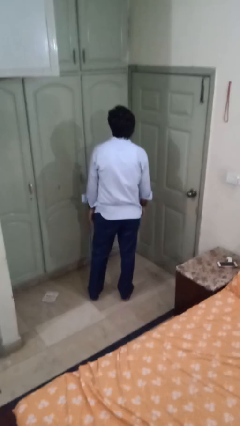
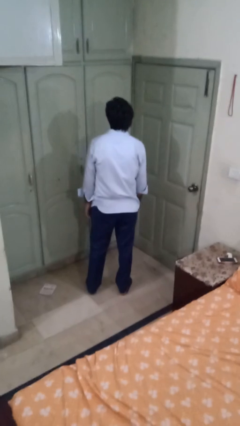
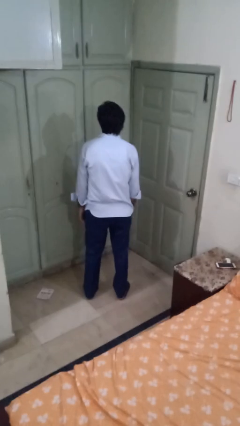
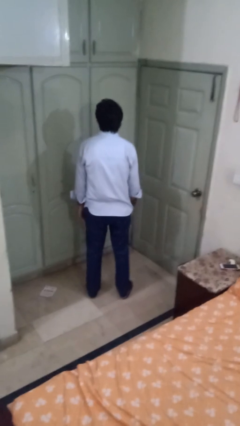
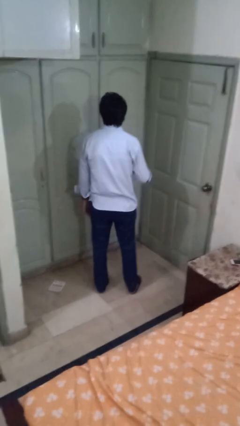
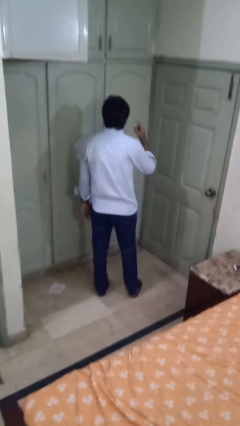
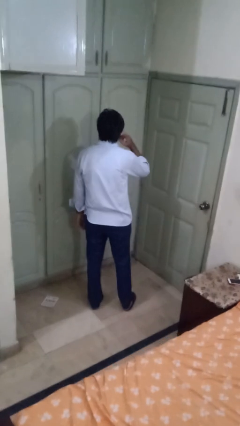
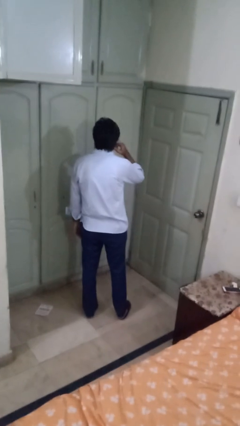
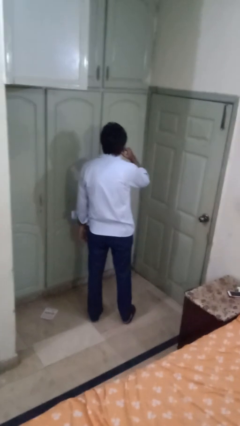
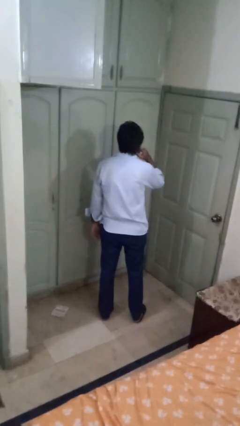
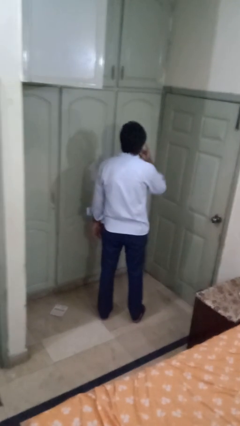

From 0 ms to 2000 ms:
person gestures listen closely

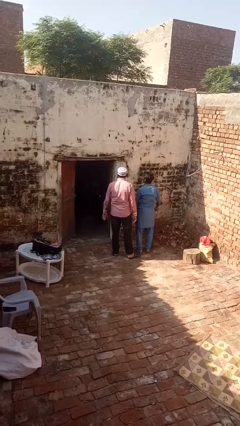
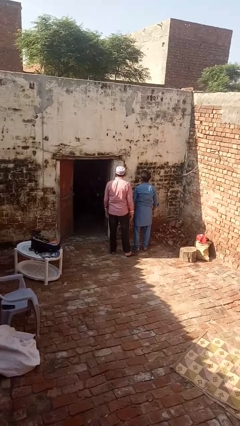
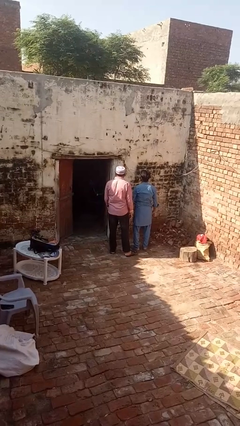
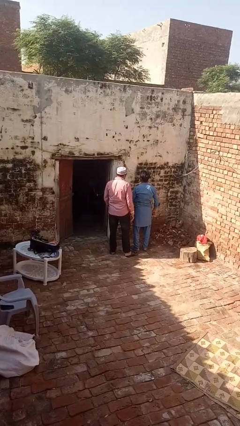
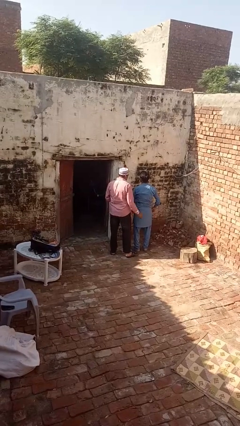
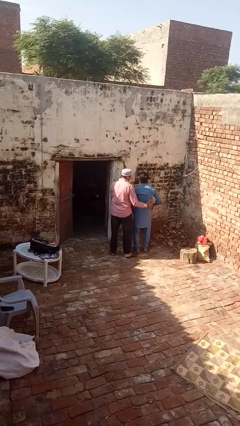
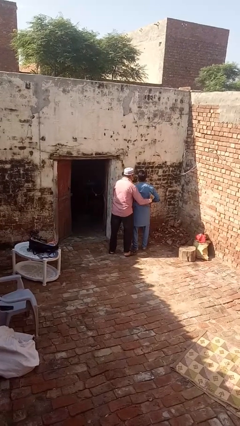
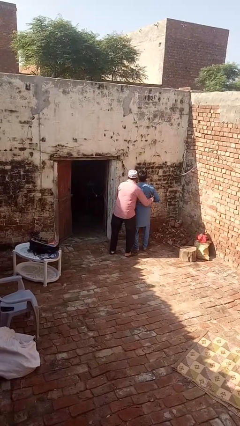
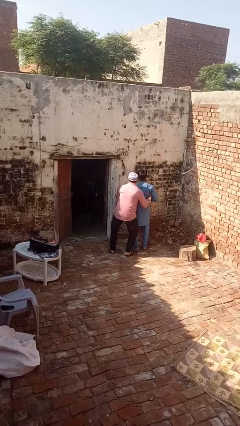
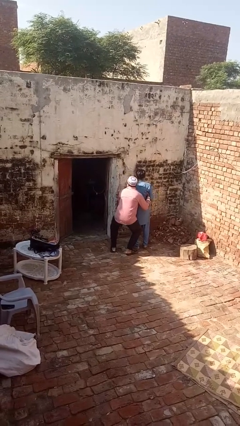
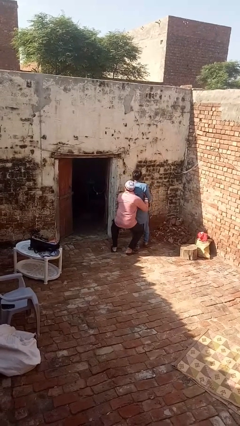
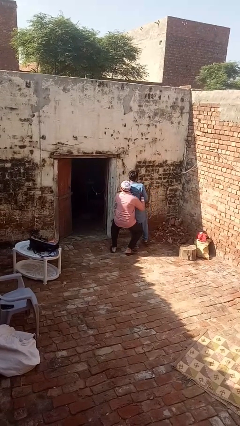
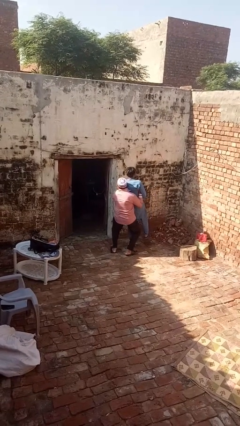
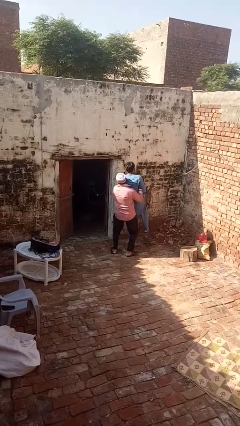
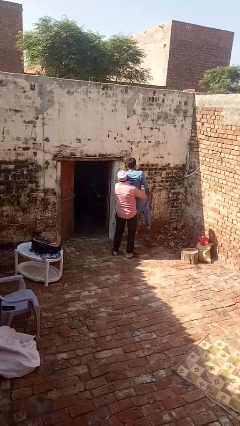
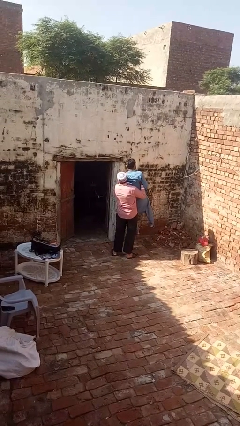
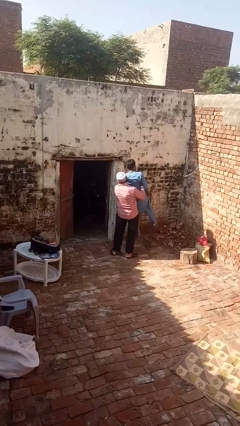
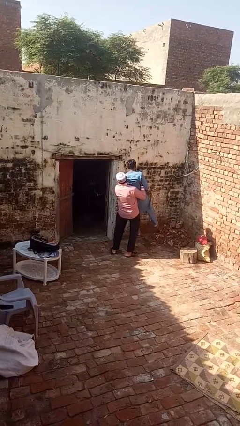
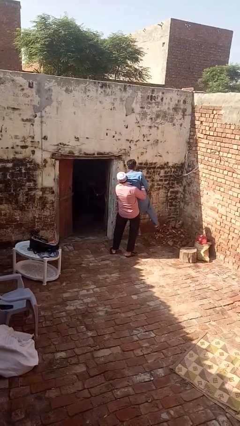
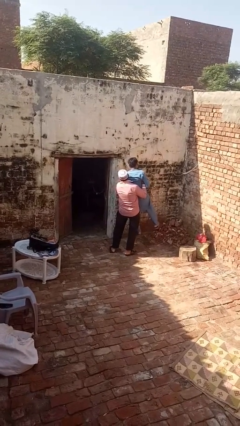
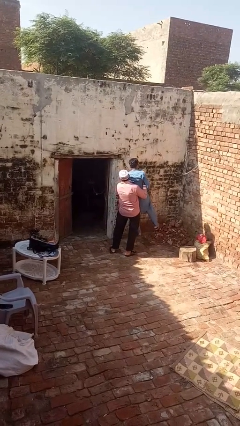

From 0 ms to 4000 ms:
person picks up person

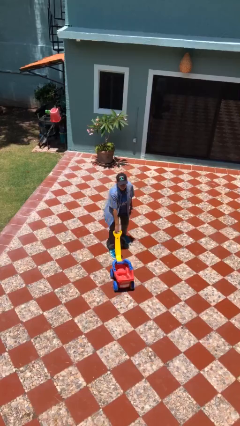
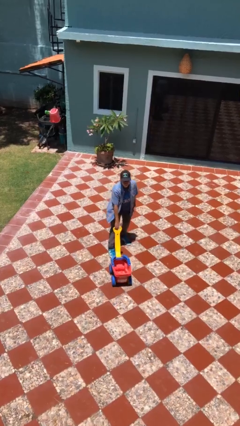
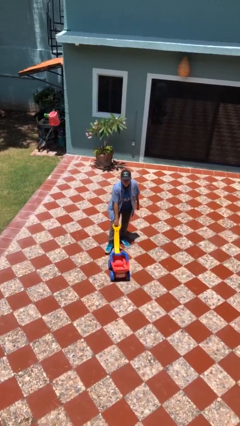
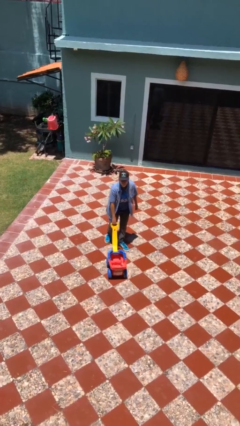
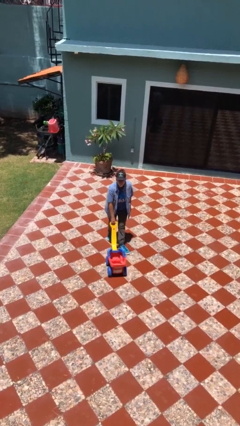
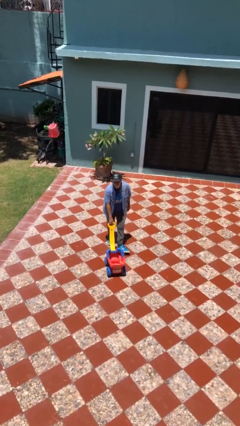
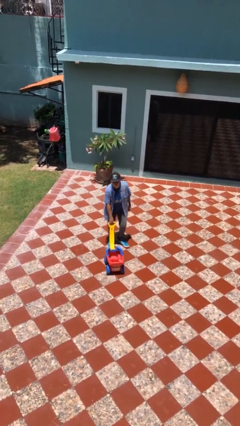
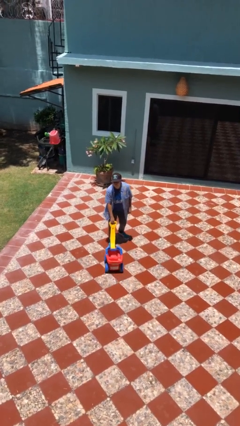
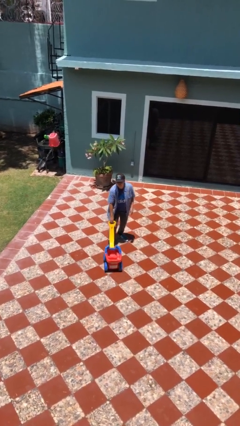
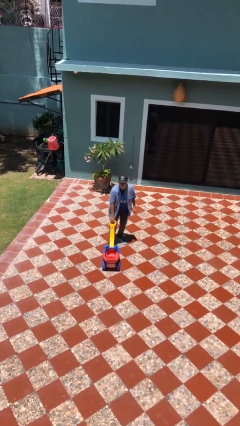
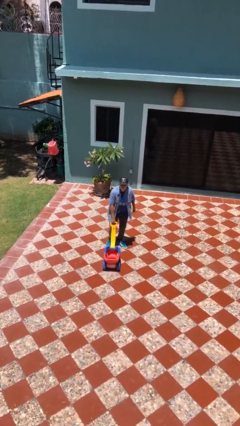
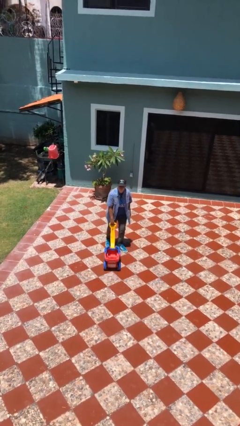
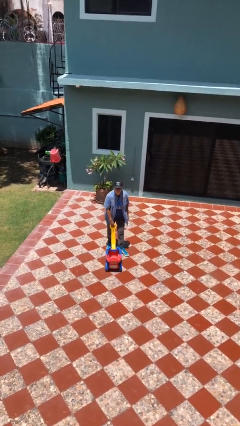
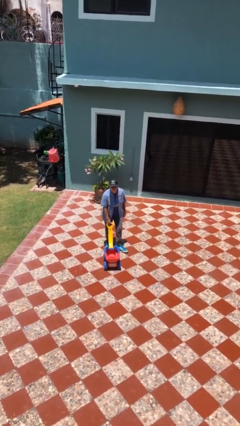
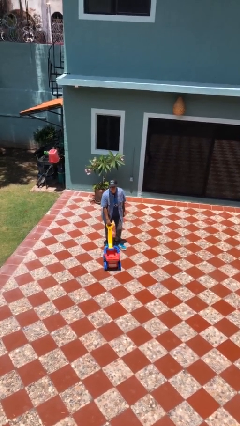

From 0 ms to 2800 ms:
person pulls wheeled cart

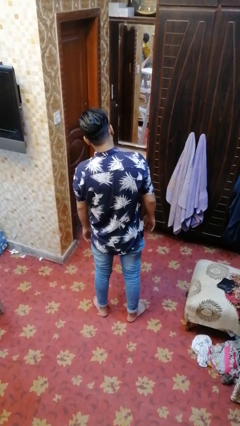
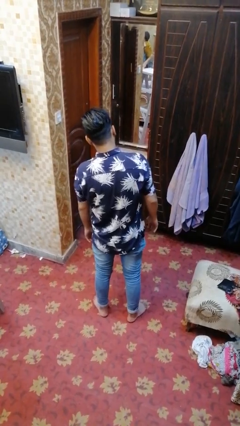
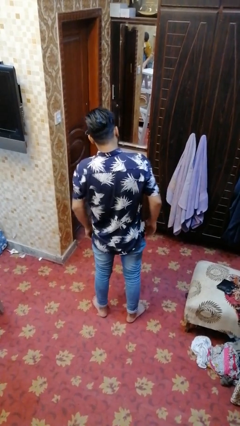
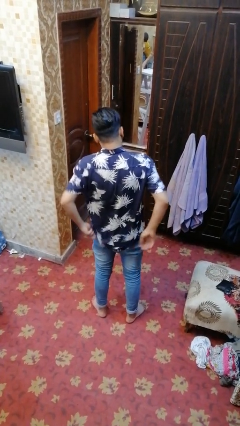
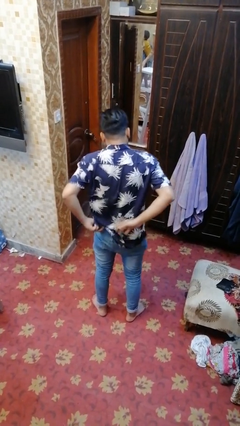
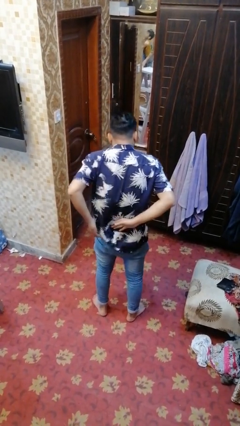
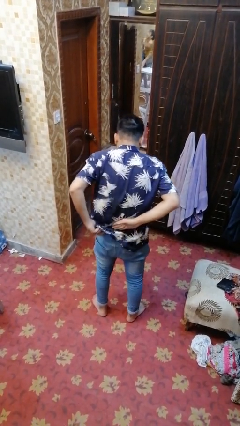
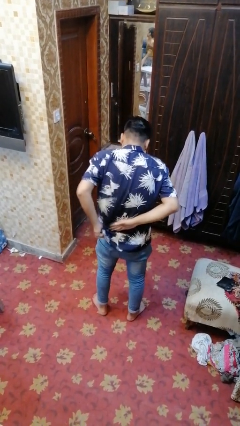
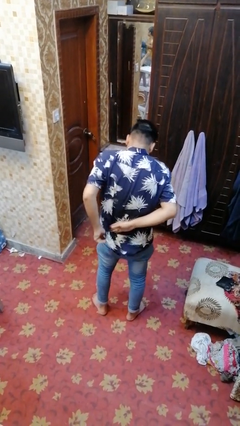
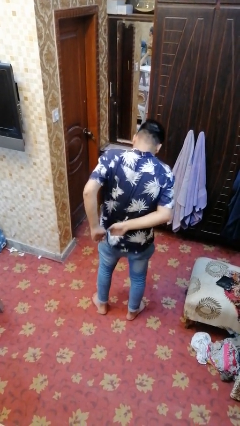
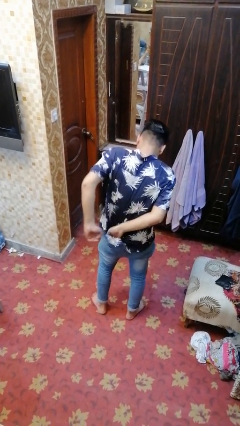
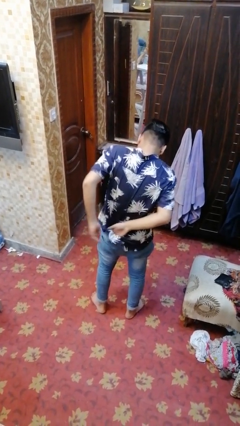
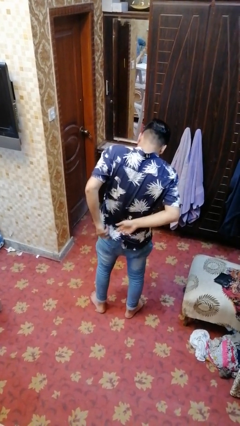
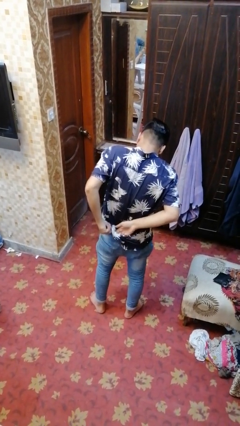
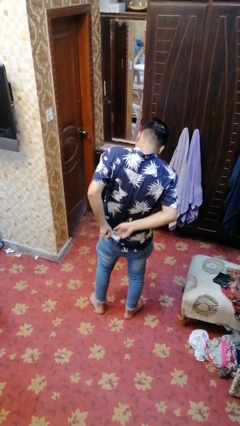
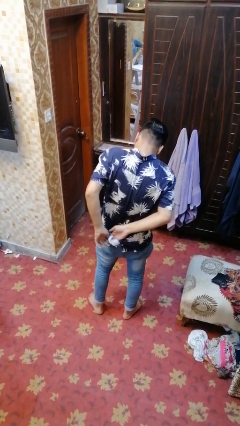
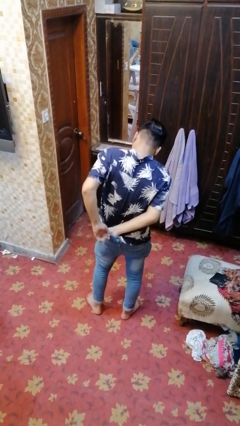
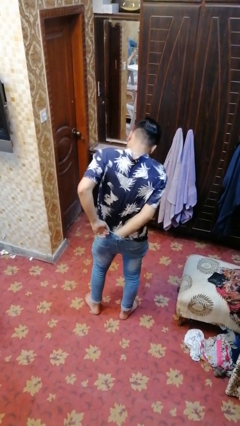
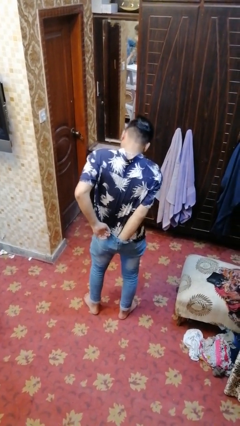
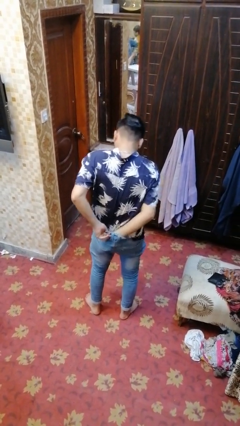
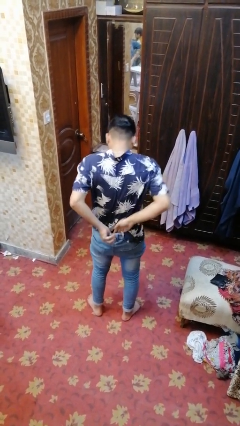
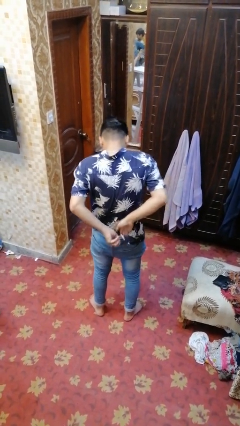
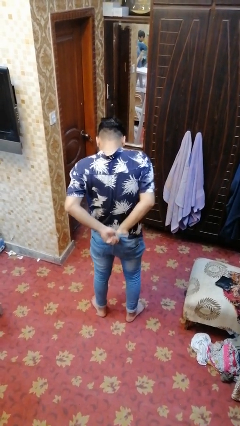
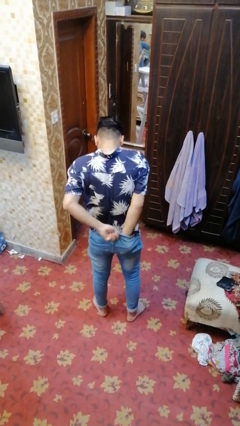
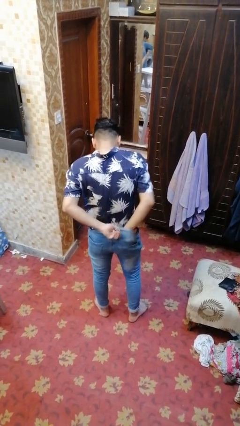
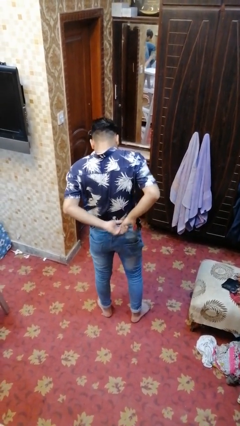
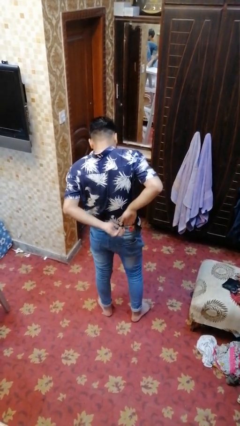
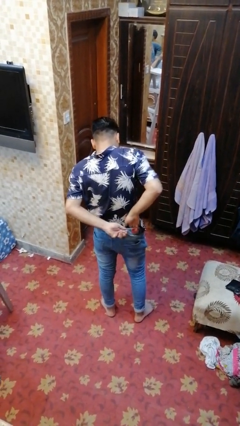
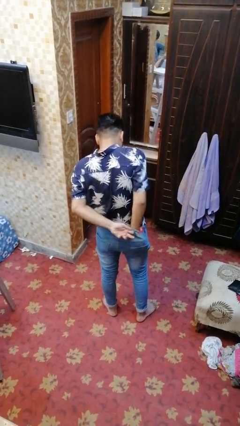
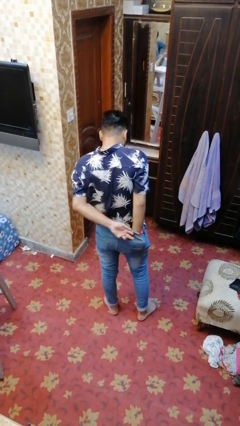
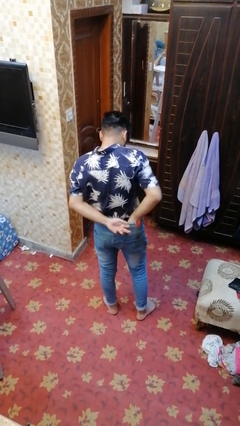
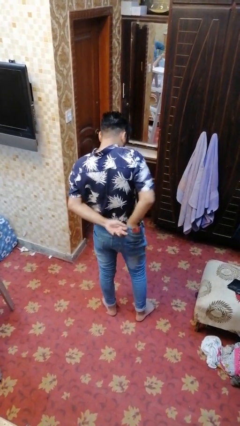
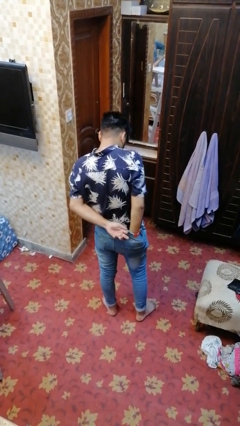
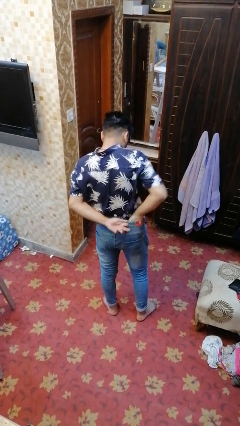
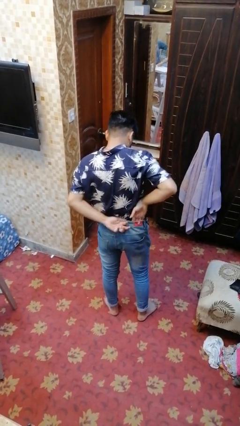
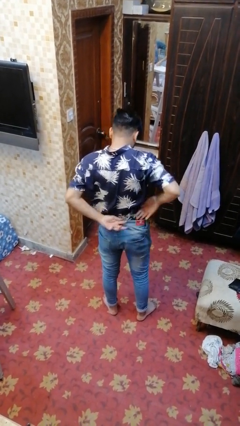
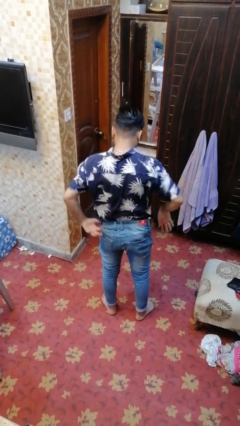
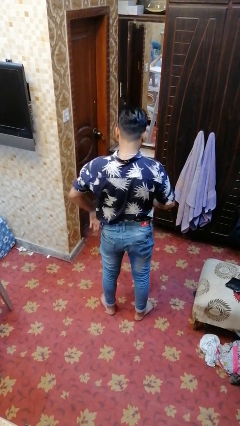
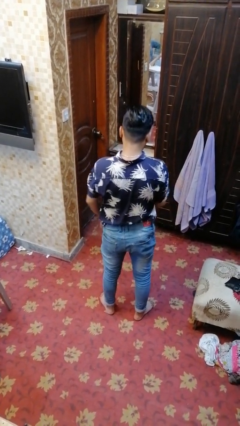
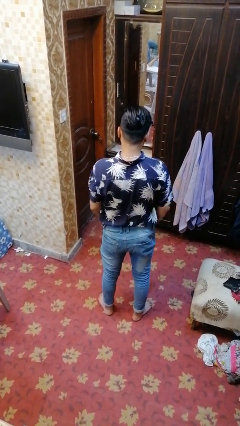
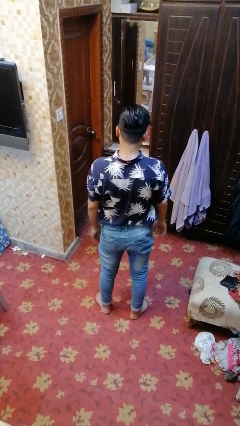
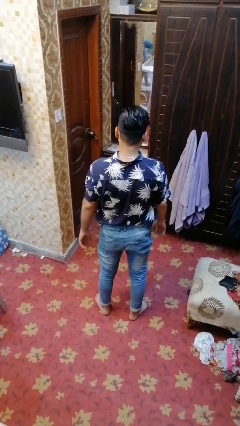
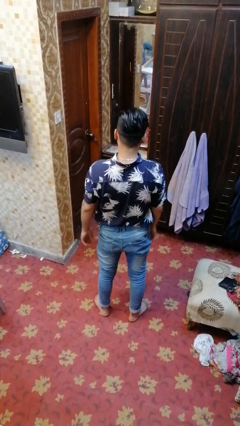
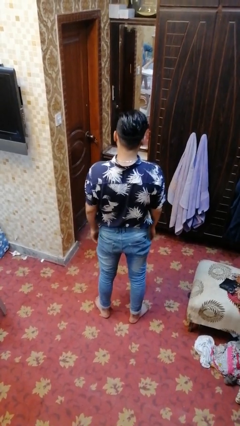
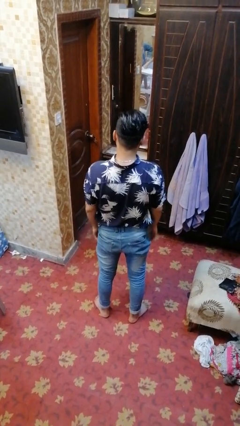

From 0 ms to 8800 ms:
person tucks in shirt

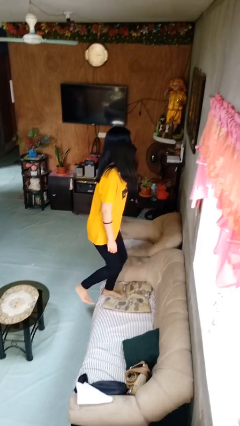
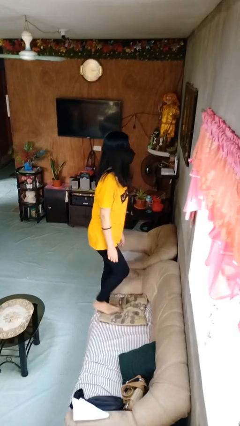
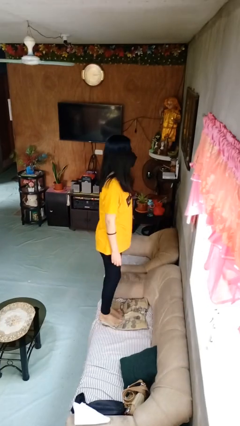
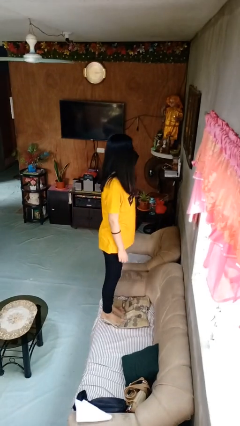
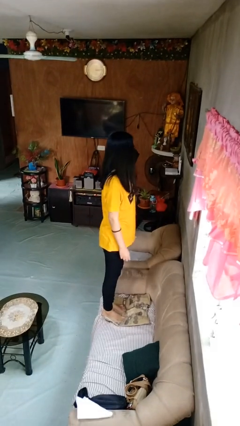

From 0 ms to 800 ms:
person climbs on couch
